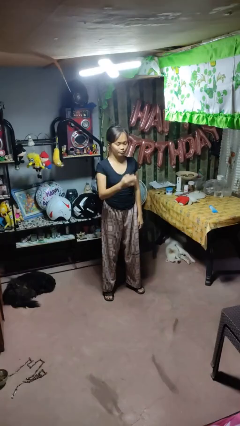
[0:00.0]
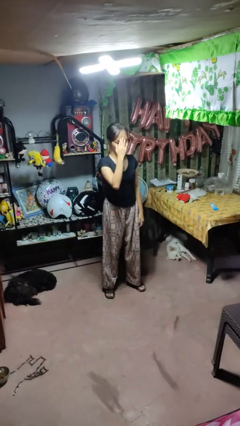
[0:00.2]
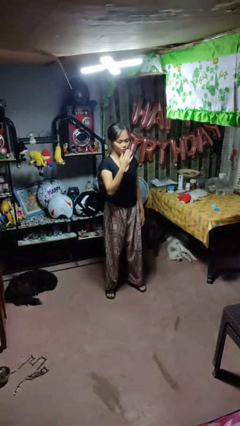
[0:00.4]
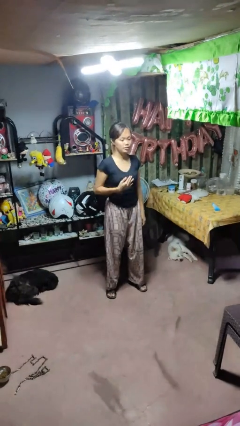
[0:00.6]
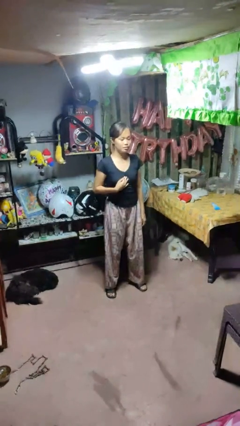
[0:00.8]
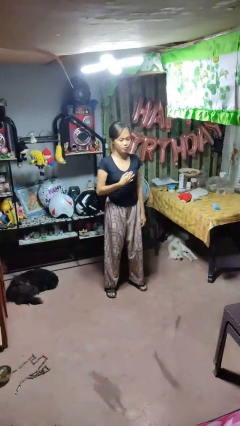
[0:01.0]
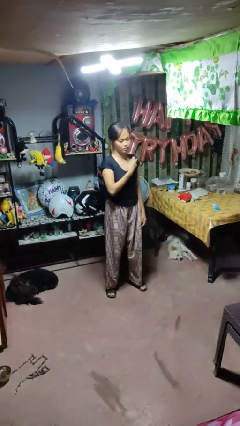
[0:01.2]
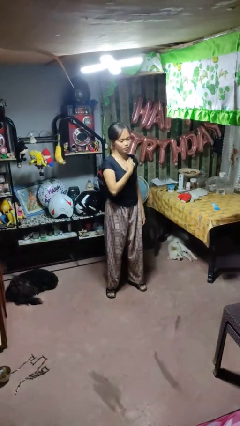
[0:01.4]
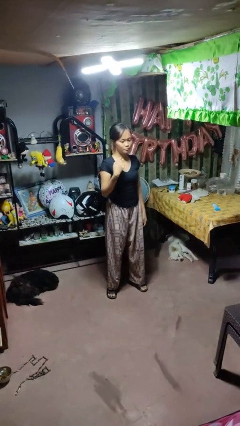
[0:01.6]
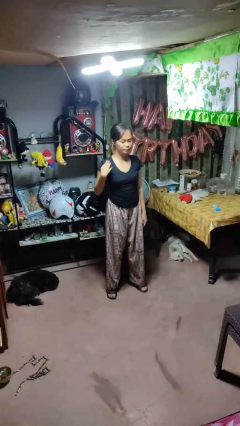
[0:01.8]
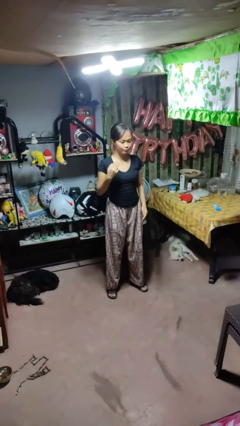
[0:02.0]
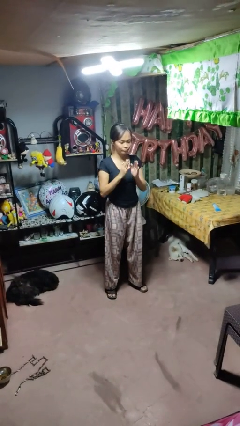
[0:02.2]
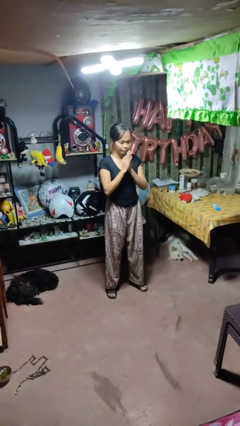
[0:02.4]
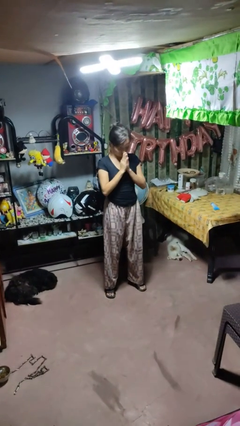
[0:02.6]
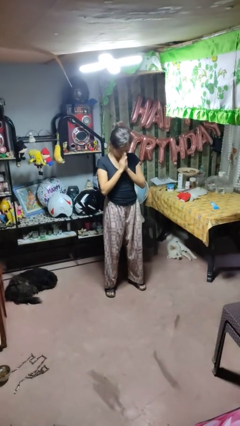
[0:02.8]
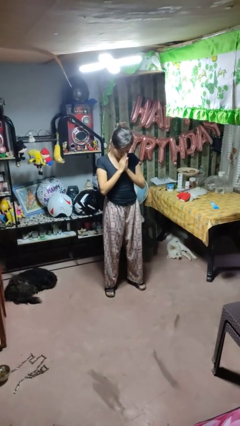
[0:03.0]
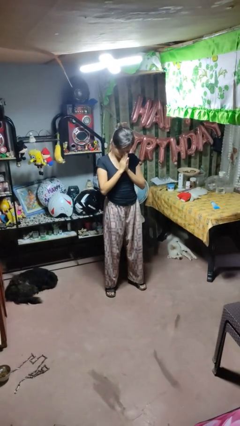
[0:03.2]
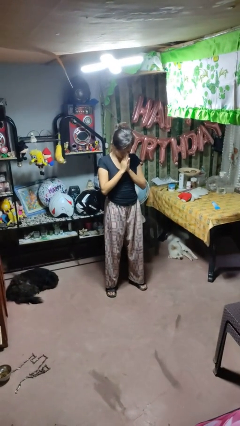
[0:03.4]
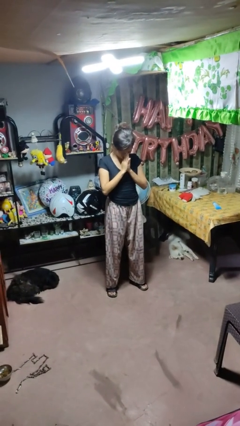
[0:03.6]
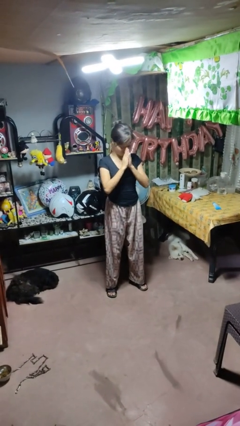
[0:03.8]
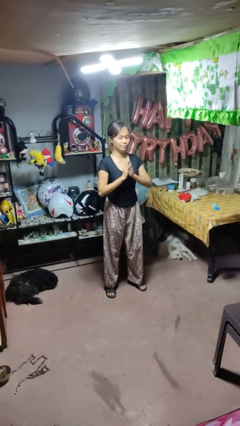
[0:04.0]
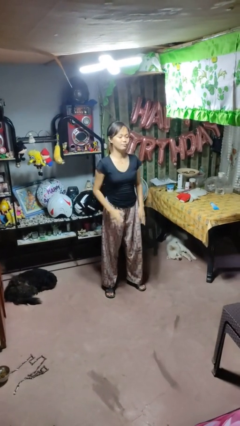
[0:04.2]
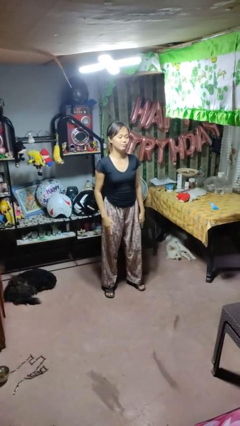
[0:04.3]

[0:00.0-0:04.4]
person prays

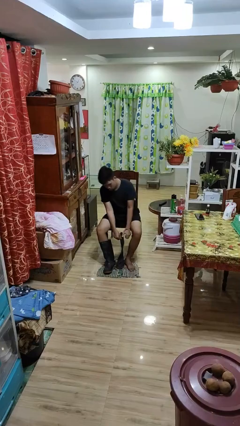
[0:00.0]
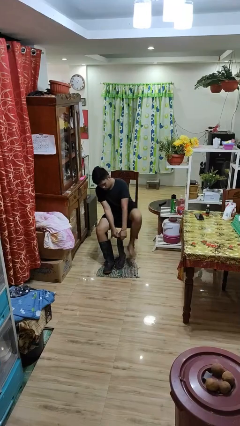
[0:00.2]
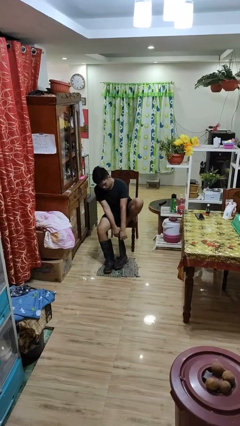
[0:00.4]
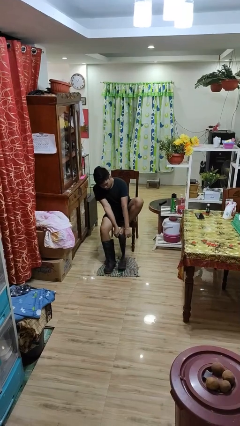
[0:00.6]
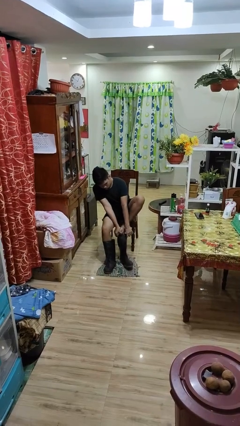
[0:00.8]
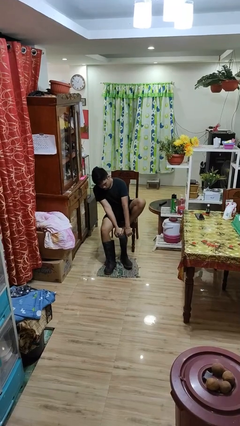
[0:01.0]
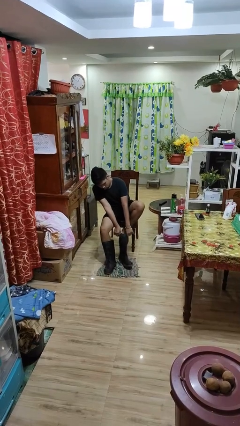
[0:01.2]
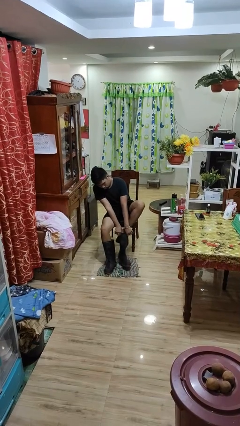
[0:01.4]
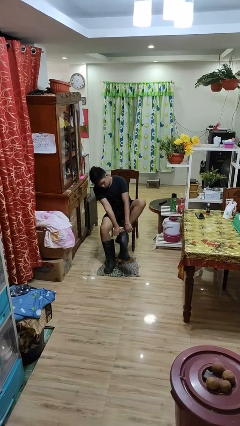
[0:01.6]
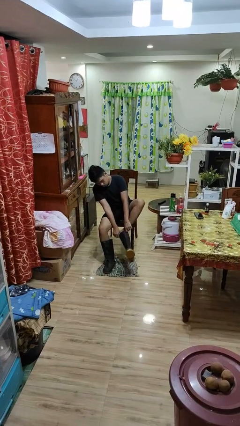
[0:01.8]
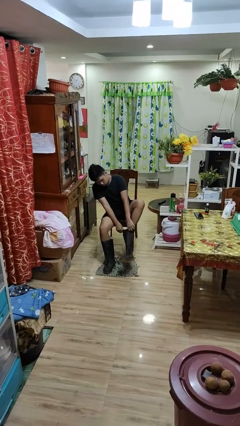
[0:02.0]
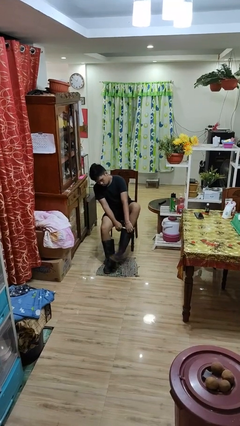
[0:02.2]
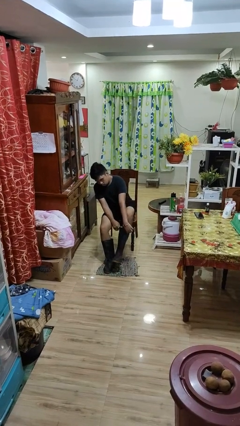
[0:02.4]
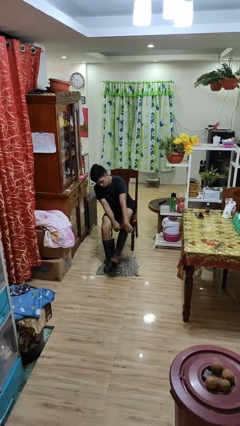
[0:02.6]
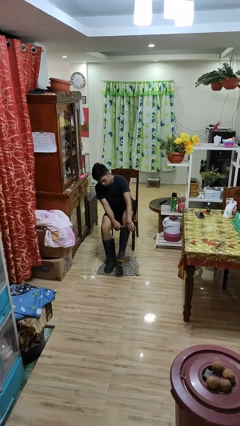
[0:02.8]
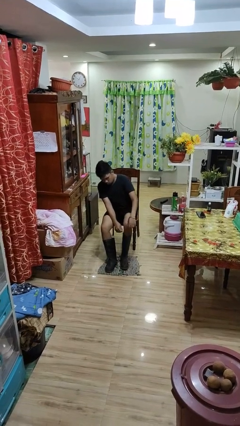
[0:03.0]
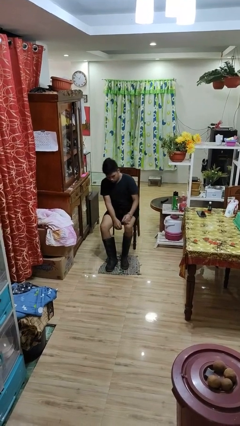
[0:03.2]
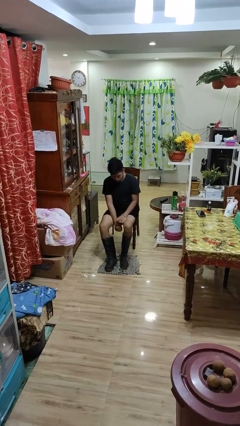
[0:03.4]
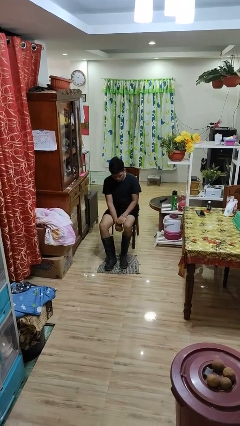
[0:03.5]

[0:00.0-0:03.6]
person uses television remote

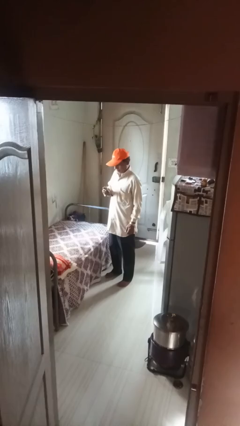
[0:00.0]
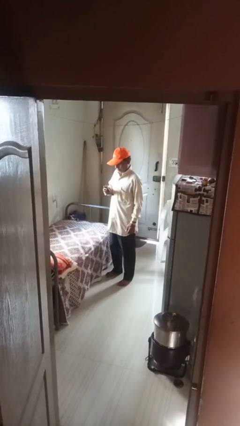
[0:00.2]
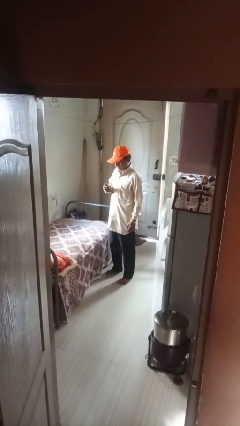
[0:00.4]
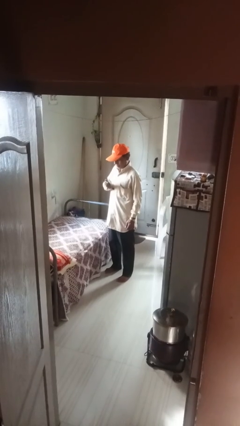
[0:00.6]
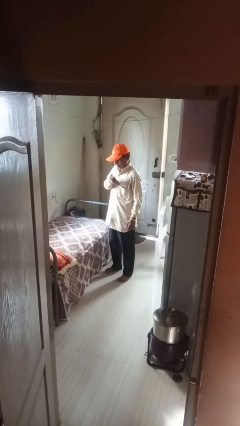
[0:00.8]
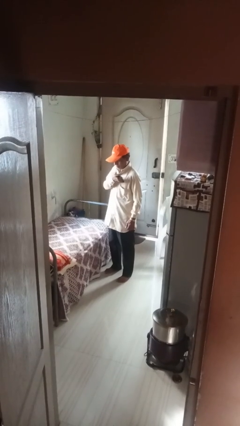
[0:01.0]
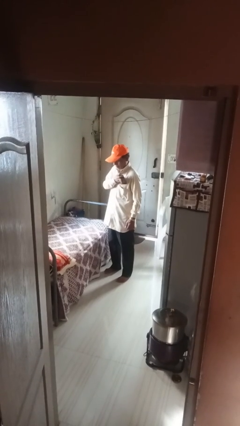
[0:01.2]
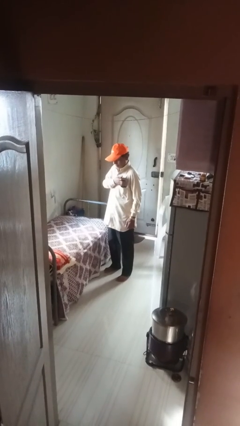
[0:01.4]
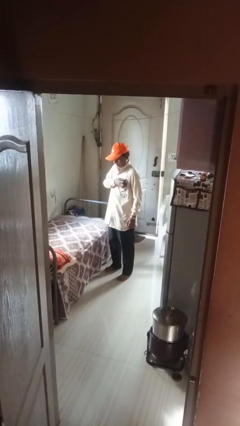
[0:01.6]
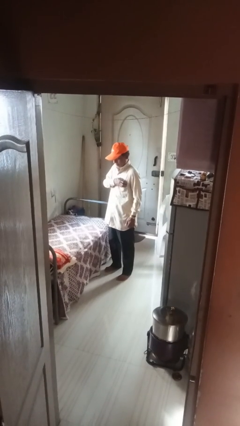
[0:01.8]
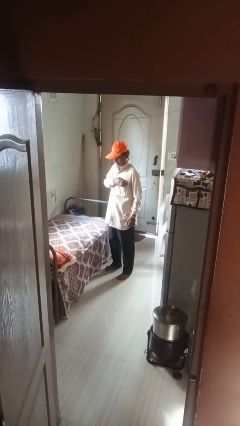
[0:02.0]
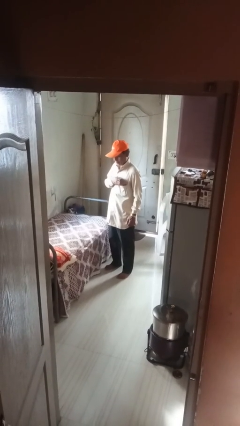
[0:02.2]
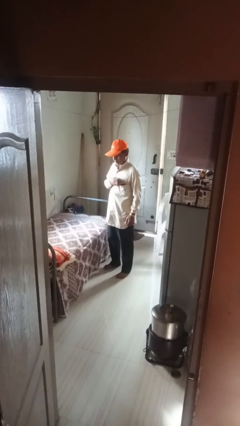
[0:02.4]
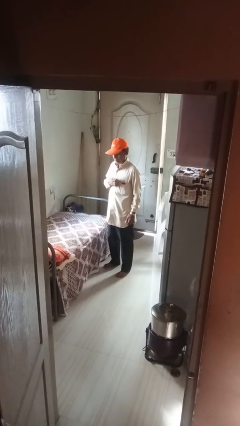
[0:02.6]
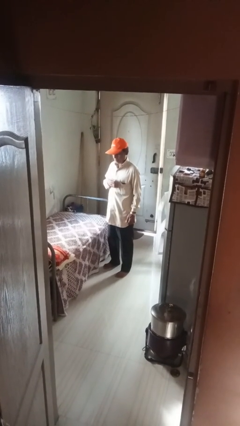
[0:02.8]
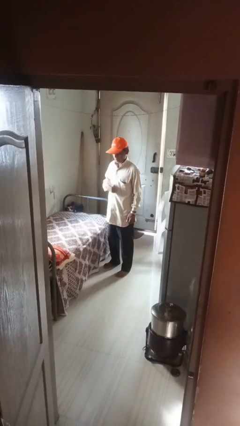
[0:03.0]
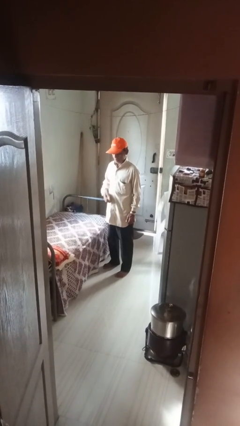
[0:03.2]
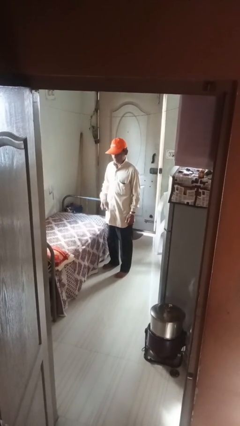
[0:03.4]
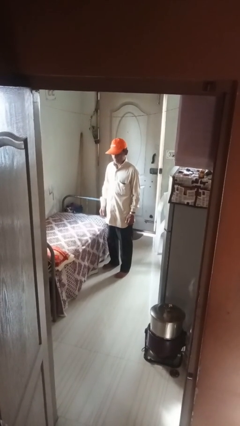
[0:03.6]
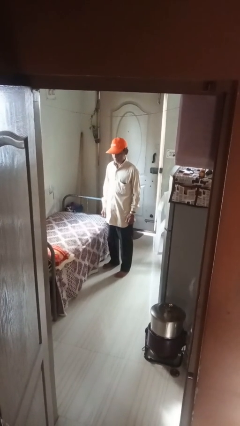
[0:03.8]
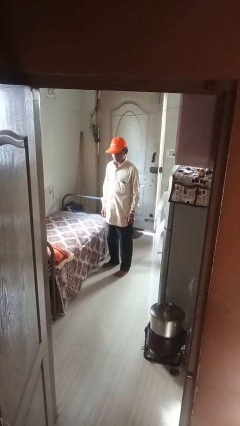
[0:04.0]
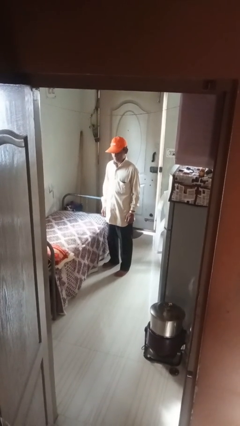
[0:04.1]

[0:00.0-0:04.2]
person puts phone into pocket

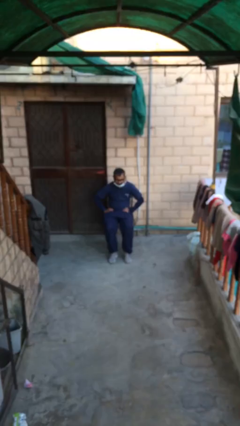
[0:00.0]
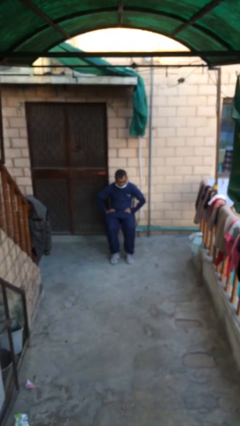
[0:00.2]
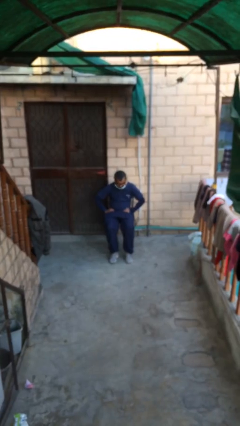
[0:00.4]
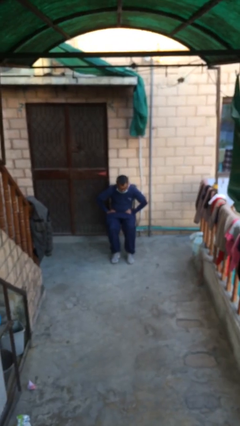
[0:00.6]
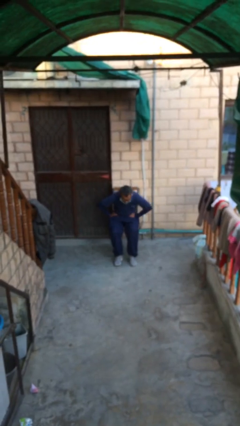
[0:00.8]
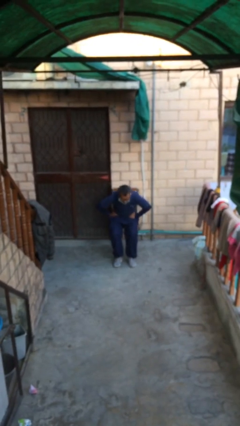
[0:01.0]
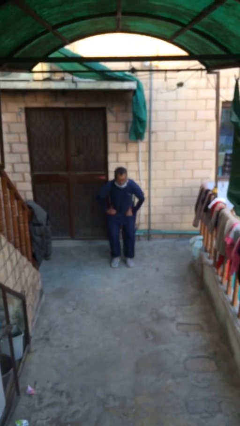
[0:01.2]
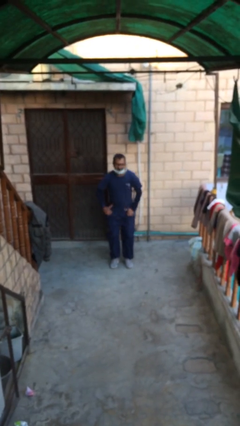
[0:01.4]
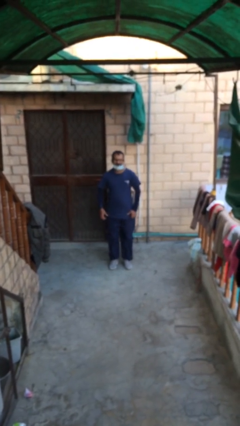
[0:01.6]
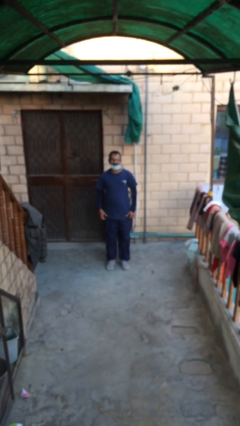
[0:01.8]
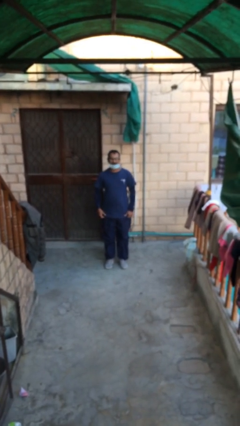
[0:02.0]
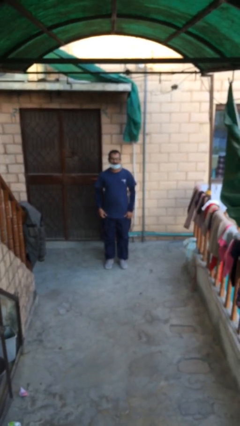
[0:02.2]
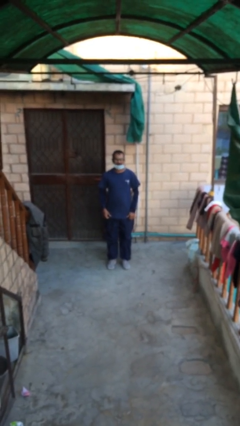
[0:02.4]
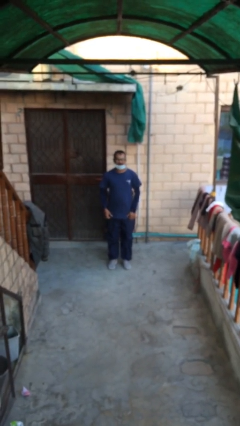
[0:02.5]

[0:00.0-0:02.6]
person stands up

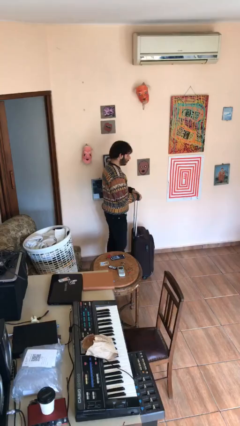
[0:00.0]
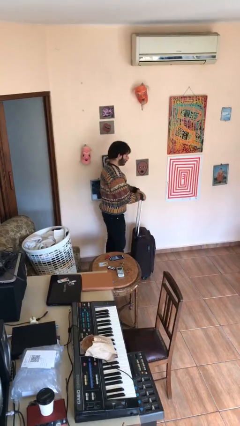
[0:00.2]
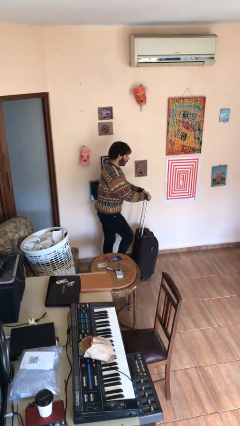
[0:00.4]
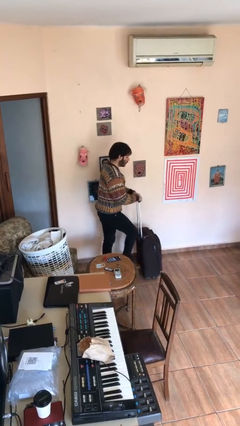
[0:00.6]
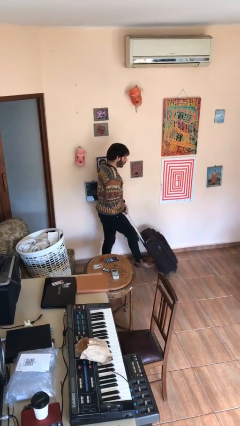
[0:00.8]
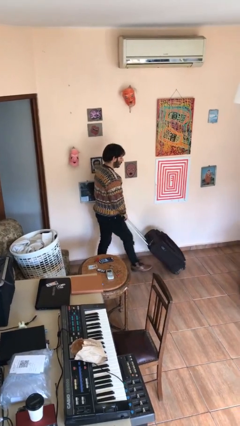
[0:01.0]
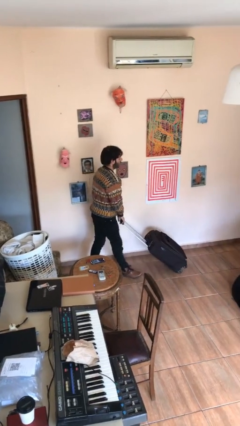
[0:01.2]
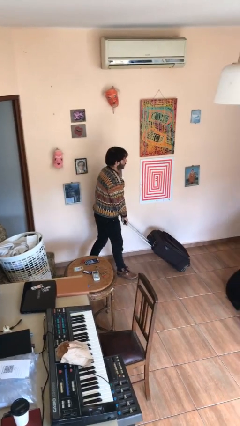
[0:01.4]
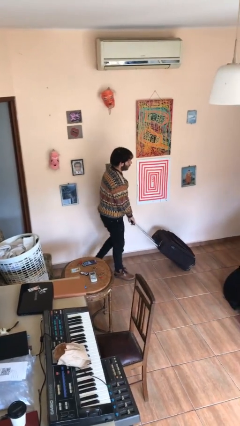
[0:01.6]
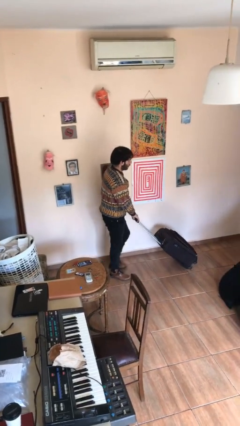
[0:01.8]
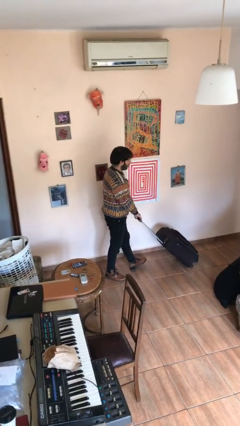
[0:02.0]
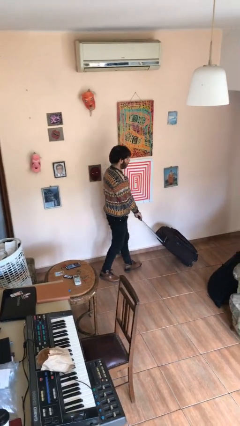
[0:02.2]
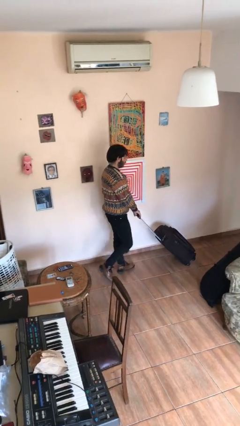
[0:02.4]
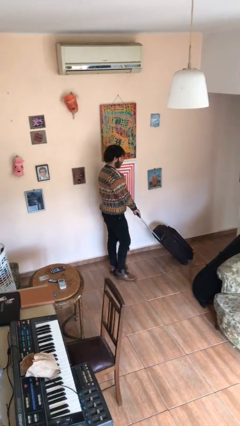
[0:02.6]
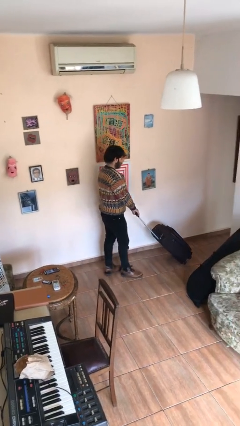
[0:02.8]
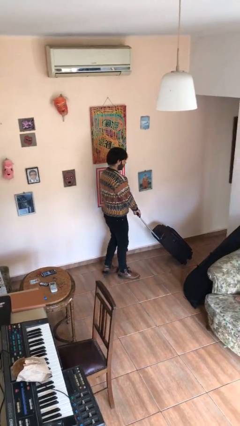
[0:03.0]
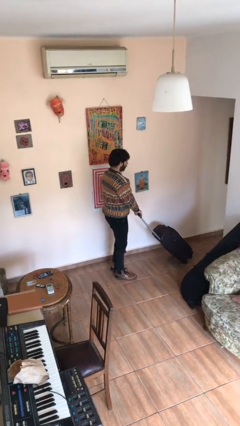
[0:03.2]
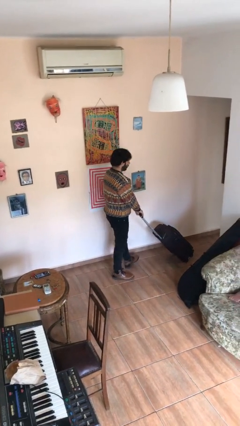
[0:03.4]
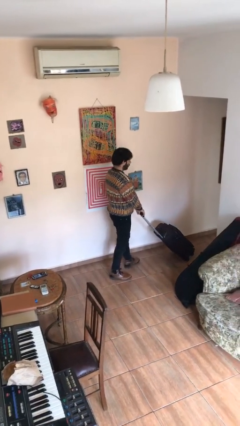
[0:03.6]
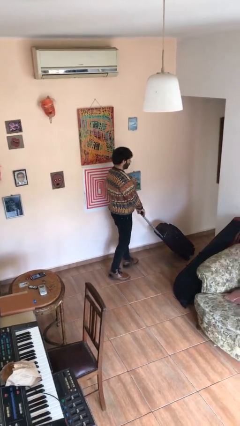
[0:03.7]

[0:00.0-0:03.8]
person pushes wheeled cart
